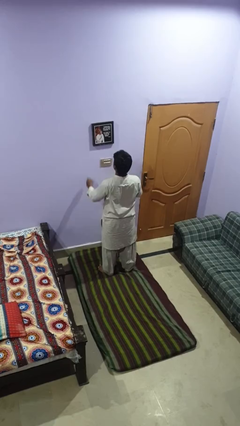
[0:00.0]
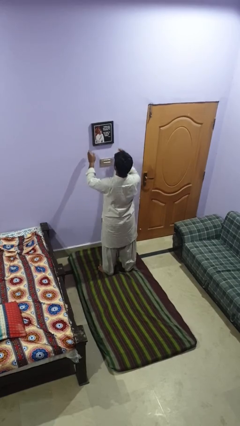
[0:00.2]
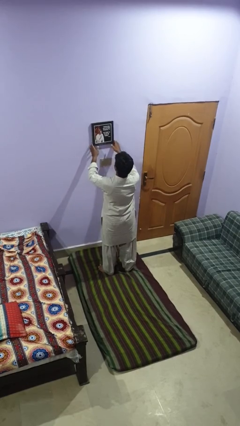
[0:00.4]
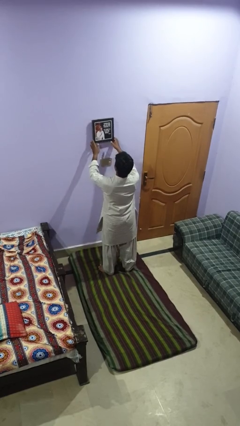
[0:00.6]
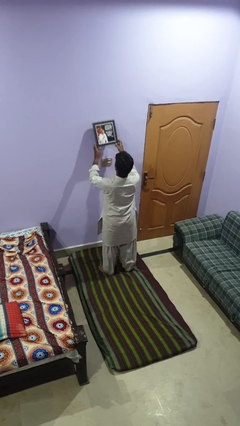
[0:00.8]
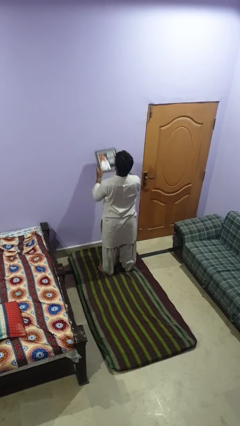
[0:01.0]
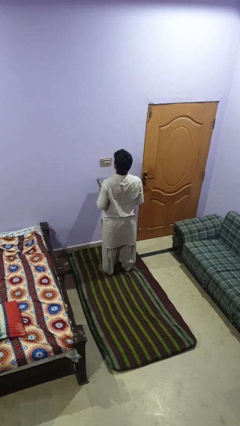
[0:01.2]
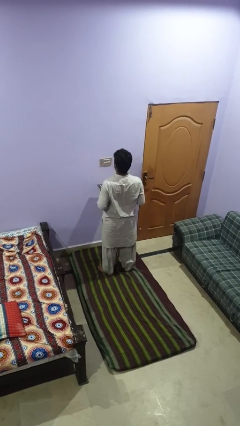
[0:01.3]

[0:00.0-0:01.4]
person takes down picture frame

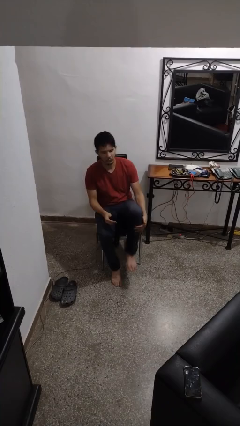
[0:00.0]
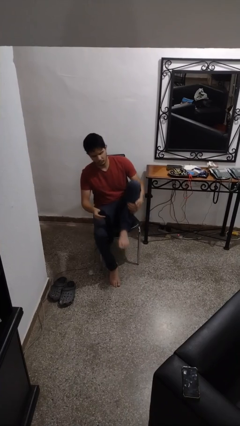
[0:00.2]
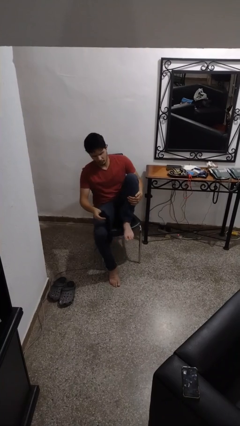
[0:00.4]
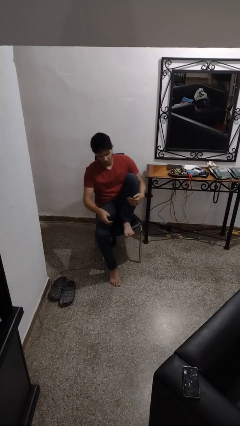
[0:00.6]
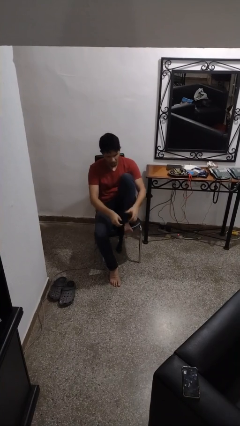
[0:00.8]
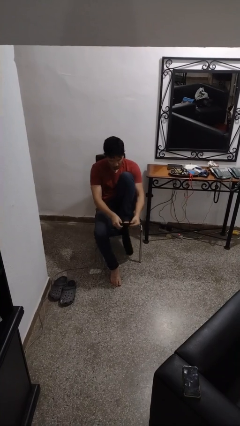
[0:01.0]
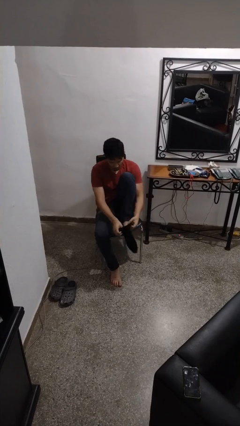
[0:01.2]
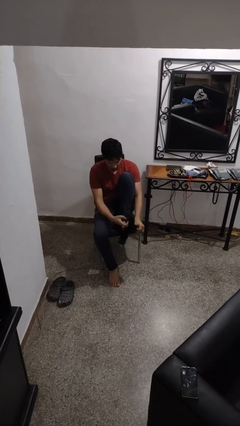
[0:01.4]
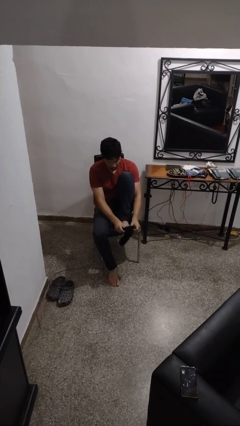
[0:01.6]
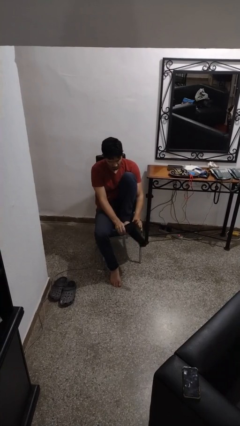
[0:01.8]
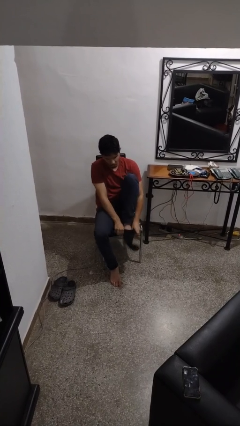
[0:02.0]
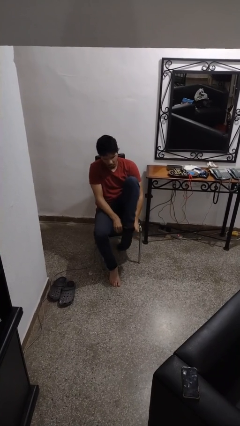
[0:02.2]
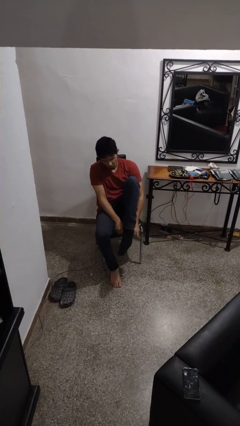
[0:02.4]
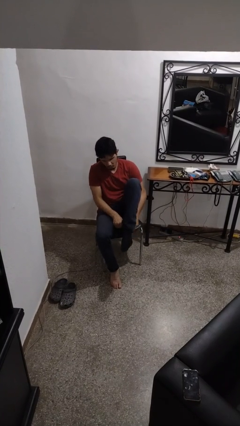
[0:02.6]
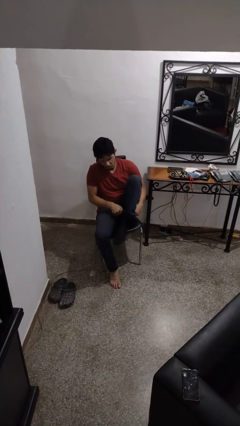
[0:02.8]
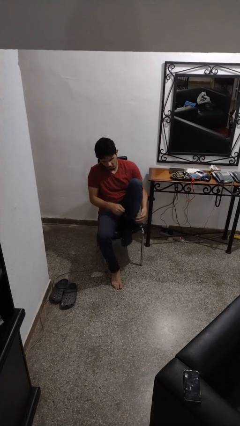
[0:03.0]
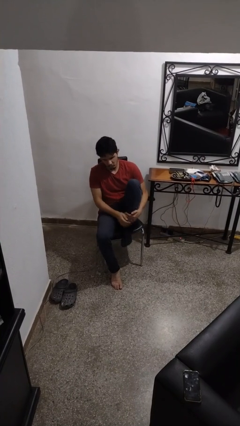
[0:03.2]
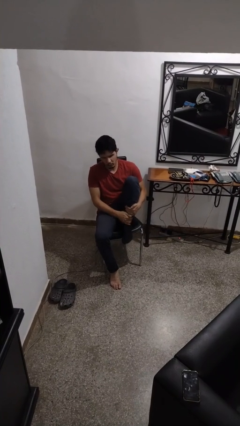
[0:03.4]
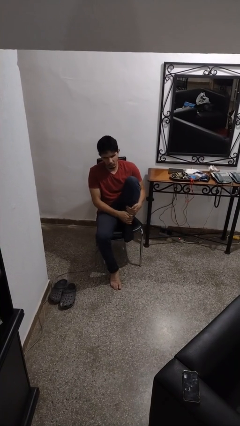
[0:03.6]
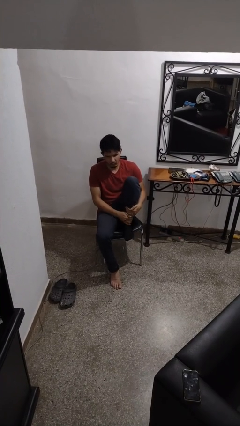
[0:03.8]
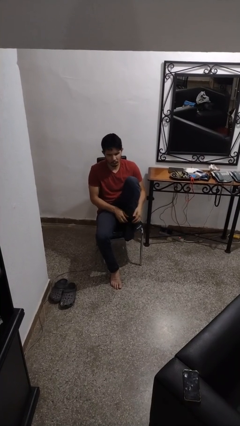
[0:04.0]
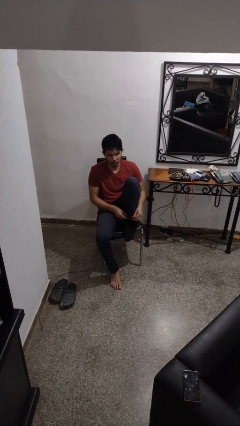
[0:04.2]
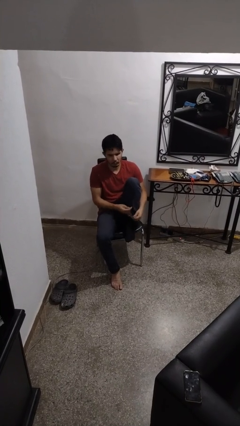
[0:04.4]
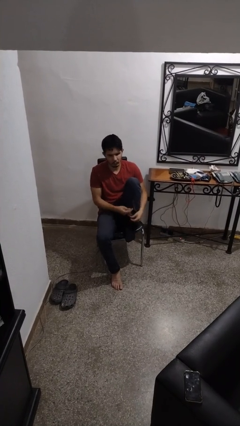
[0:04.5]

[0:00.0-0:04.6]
person puts on socks

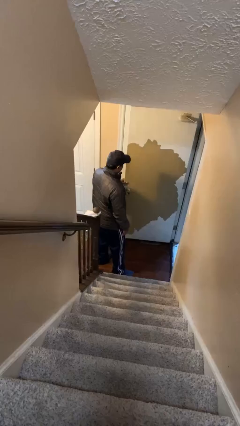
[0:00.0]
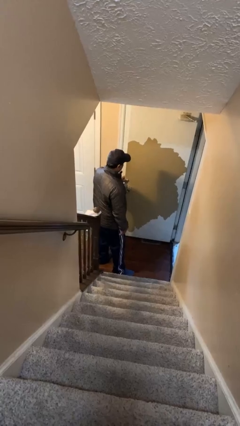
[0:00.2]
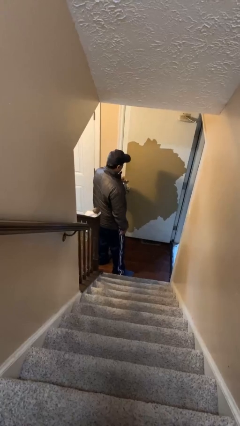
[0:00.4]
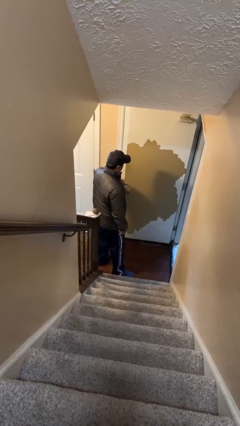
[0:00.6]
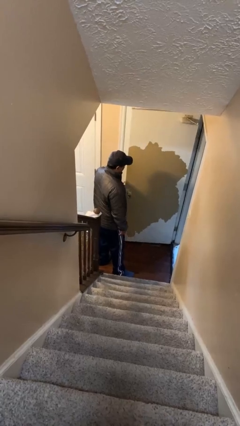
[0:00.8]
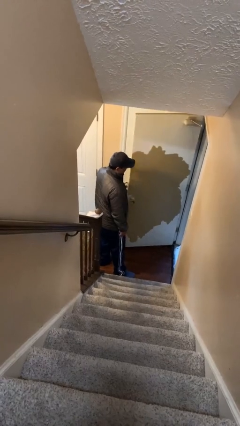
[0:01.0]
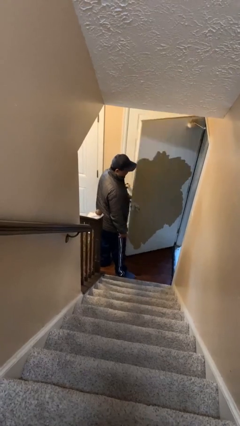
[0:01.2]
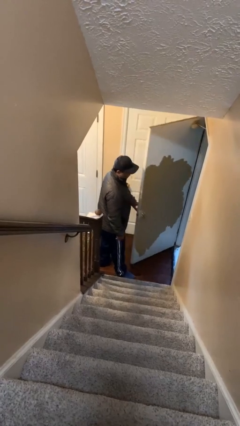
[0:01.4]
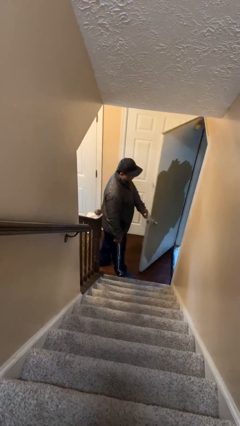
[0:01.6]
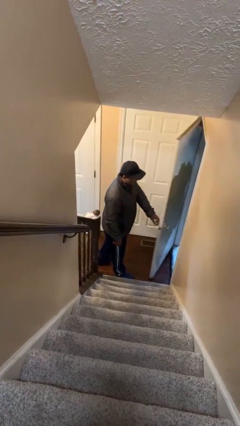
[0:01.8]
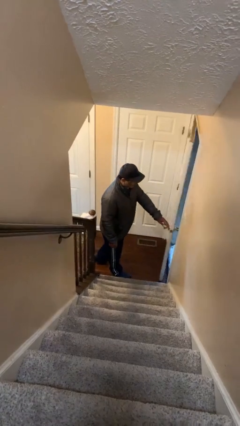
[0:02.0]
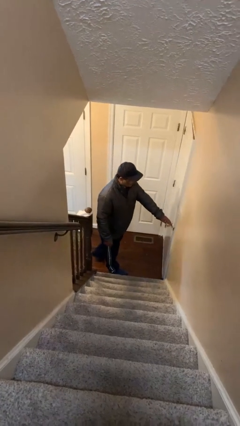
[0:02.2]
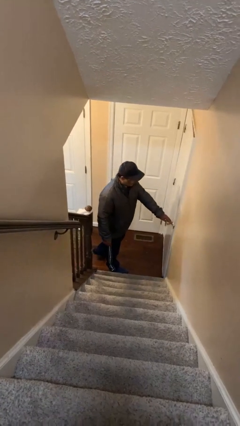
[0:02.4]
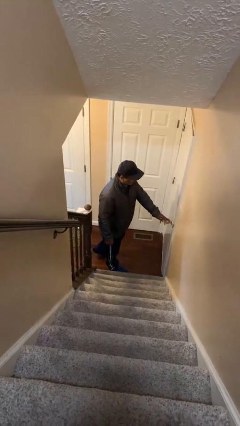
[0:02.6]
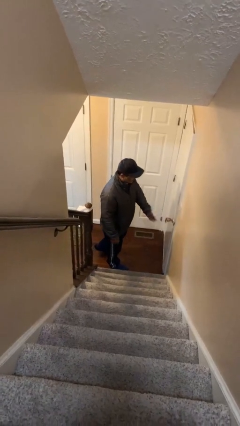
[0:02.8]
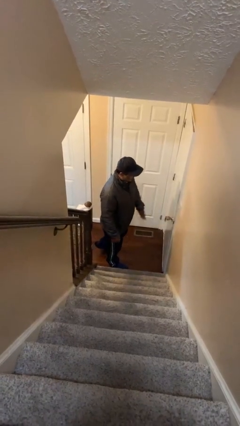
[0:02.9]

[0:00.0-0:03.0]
person closes facility door

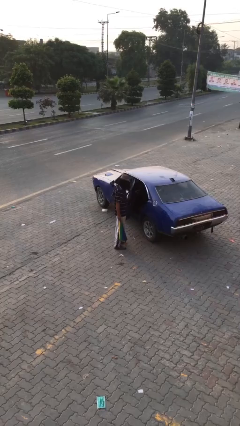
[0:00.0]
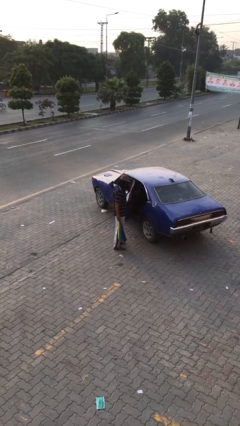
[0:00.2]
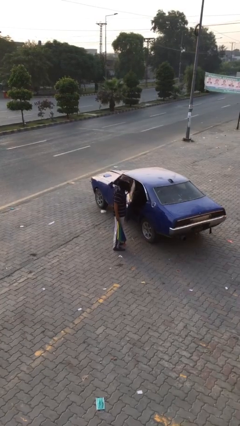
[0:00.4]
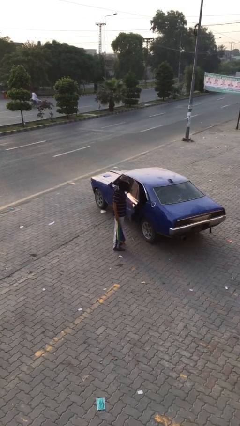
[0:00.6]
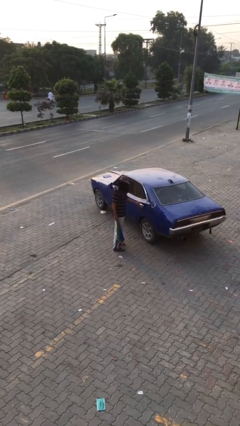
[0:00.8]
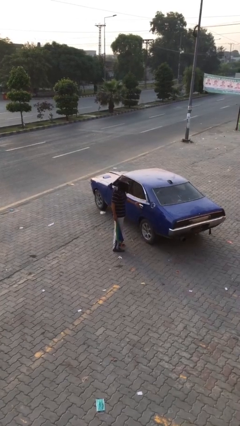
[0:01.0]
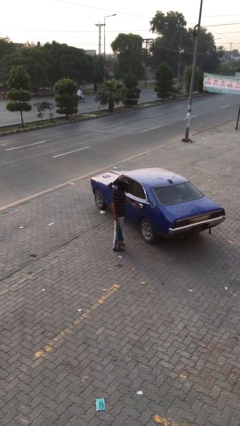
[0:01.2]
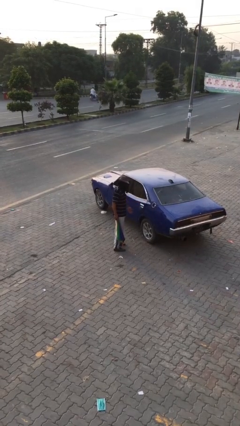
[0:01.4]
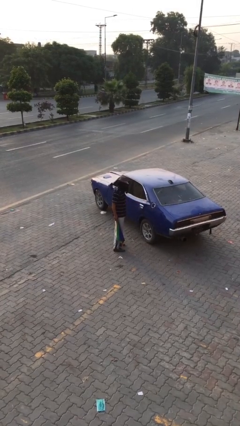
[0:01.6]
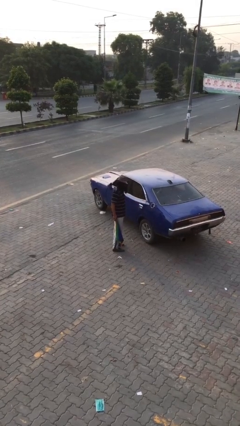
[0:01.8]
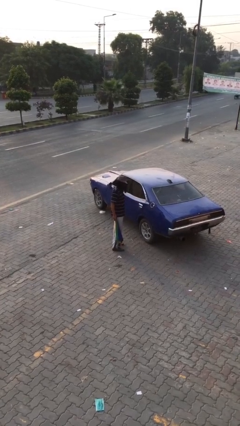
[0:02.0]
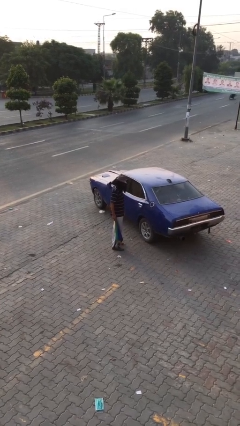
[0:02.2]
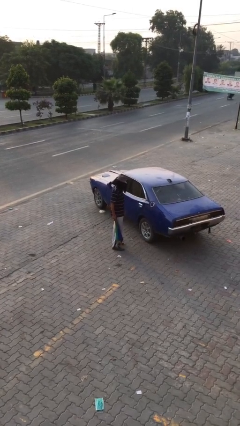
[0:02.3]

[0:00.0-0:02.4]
person closes car door

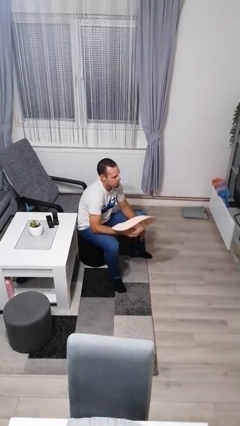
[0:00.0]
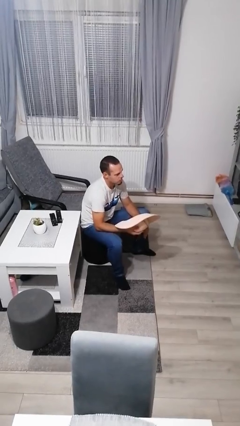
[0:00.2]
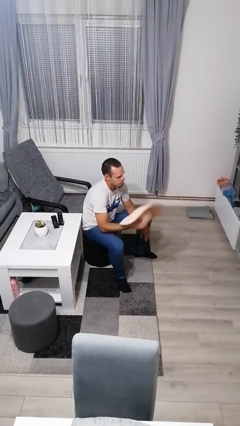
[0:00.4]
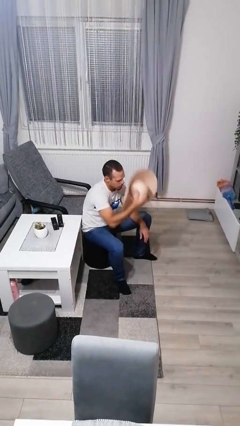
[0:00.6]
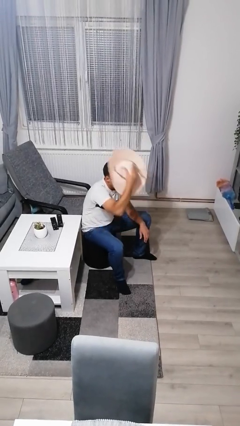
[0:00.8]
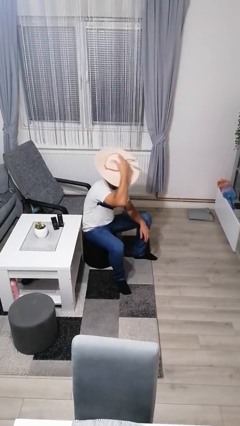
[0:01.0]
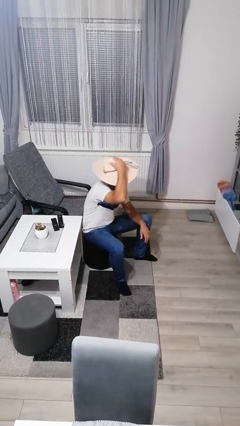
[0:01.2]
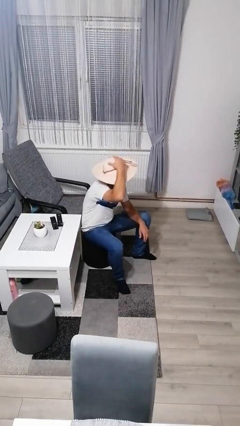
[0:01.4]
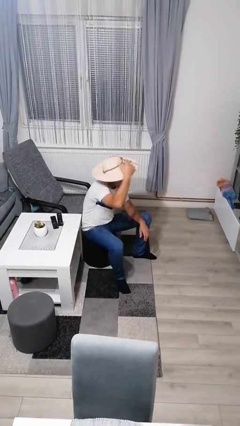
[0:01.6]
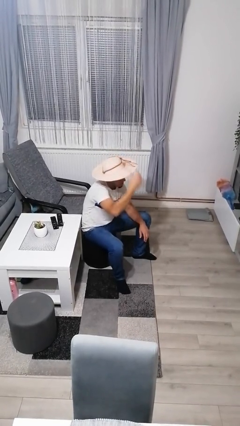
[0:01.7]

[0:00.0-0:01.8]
person puts on hat

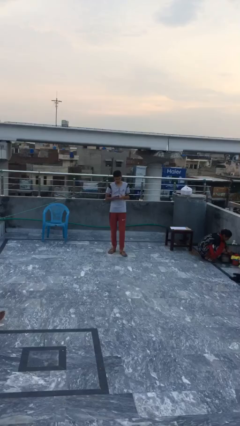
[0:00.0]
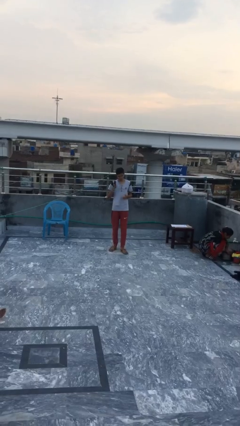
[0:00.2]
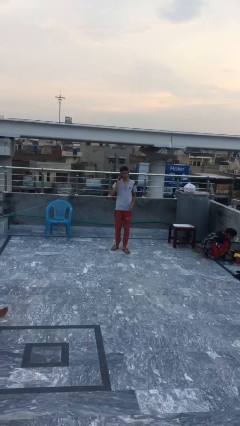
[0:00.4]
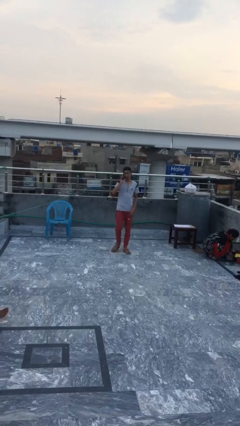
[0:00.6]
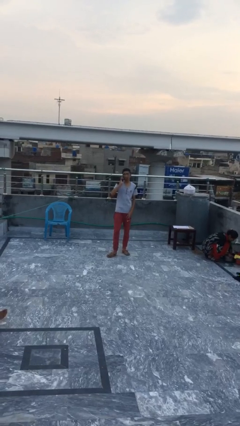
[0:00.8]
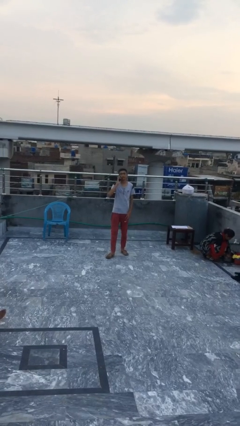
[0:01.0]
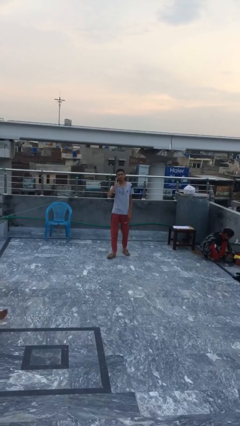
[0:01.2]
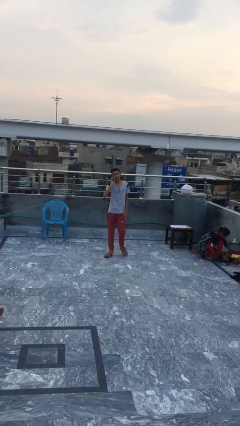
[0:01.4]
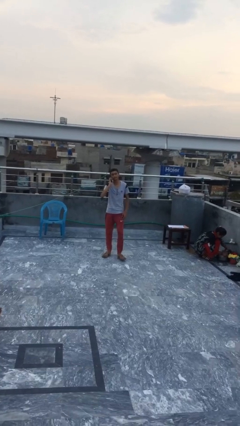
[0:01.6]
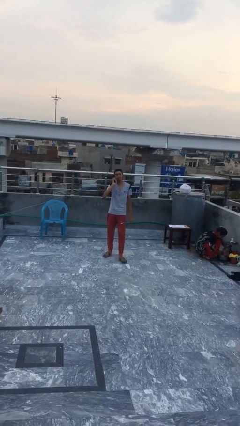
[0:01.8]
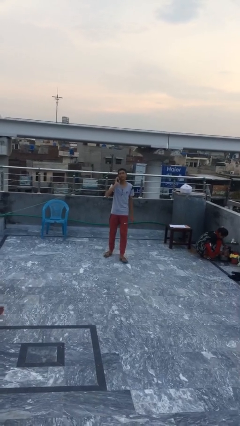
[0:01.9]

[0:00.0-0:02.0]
person talks on phone

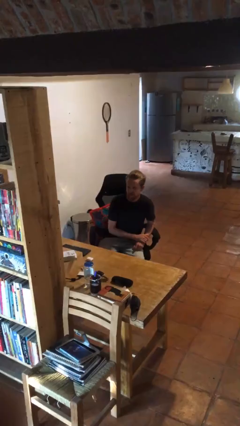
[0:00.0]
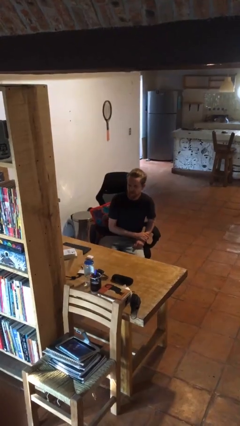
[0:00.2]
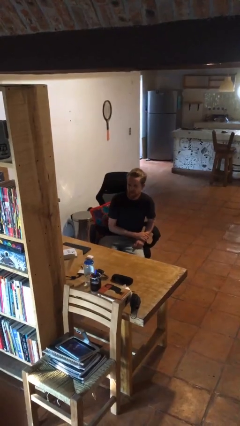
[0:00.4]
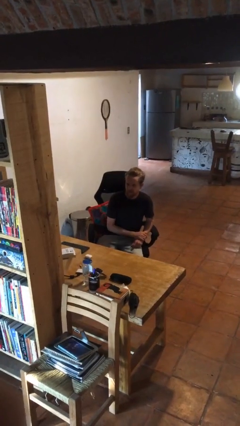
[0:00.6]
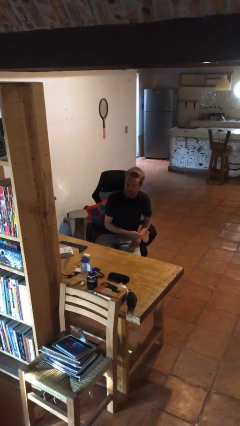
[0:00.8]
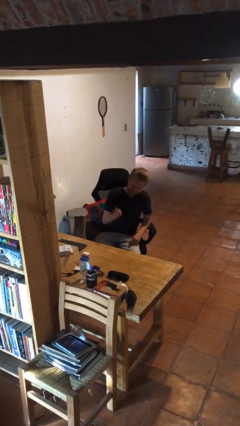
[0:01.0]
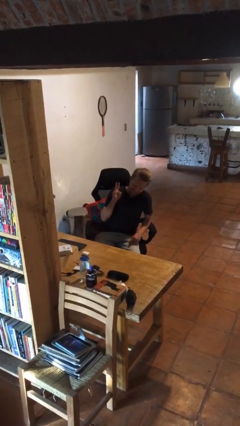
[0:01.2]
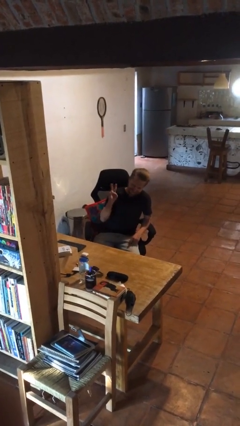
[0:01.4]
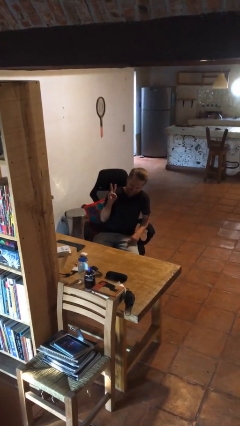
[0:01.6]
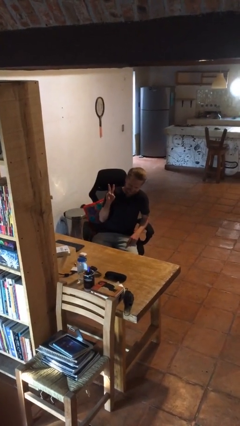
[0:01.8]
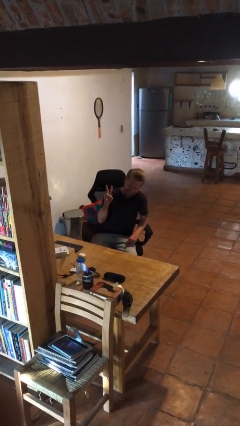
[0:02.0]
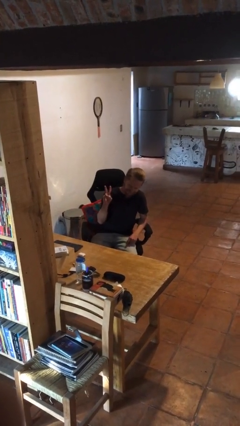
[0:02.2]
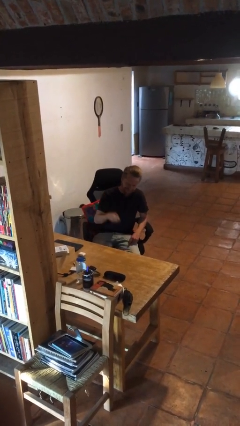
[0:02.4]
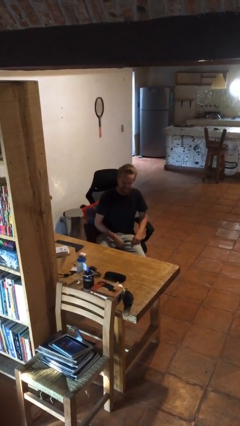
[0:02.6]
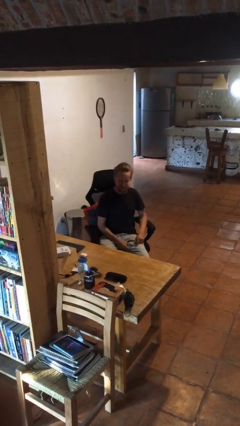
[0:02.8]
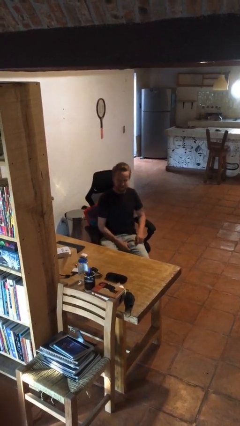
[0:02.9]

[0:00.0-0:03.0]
person gestures peace
